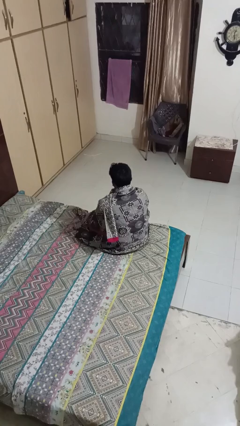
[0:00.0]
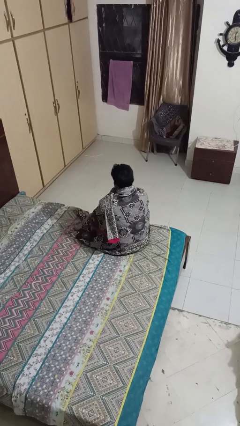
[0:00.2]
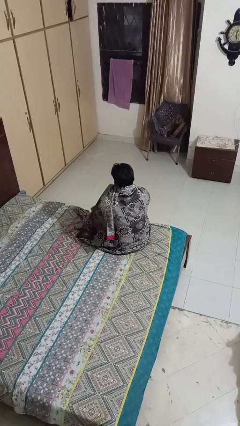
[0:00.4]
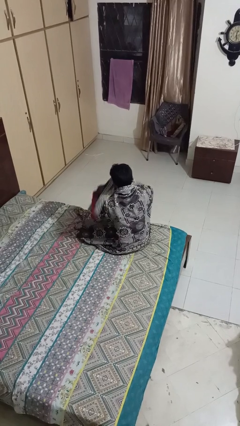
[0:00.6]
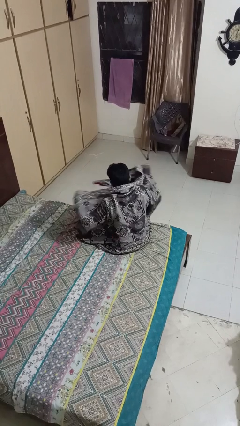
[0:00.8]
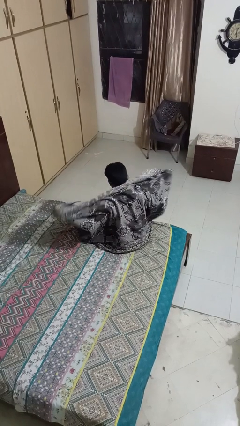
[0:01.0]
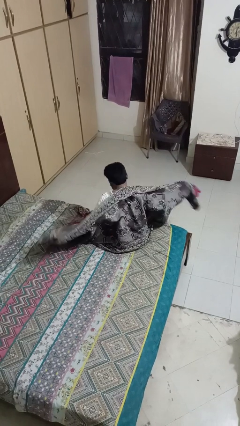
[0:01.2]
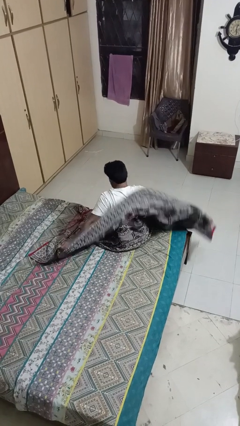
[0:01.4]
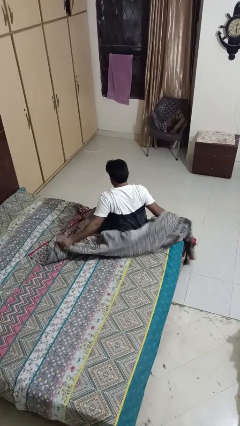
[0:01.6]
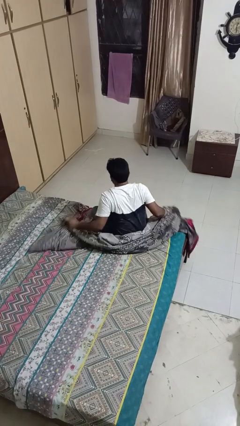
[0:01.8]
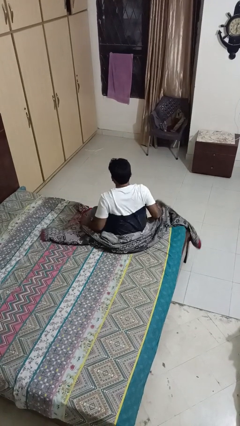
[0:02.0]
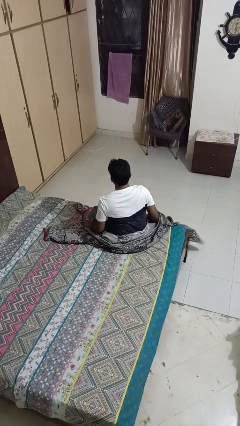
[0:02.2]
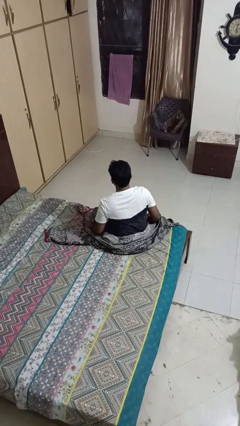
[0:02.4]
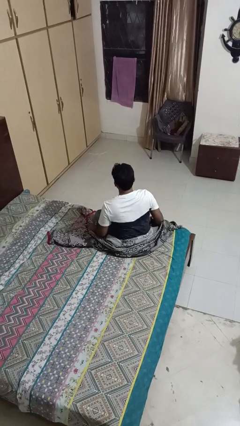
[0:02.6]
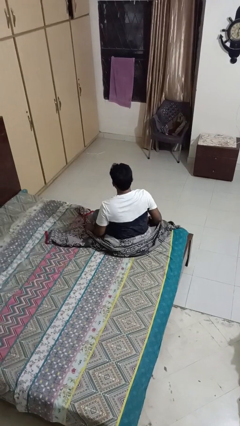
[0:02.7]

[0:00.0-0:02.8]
person uncovers with blanket

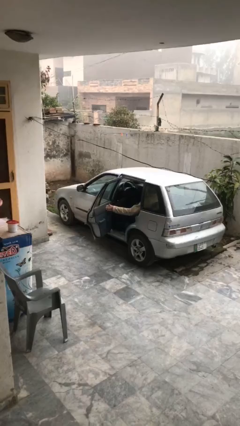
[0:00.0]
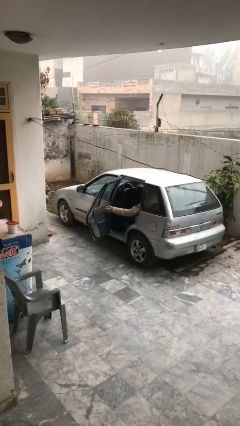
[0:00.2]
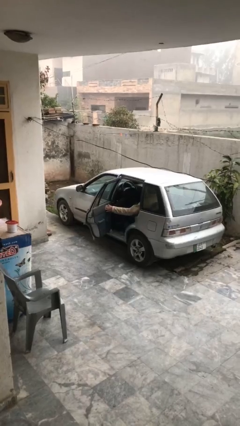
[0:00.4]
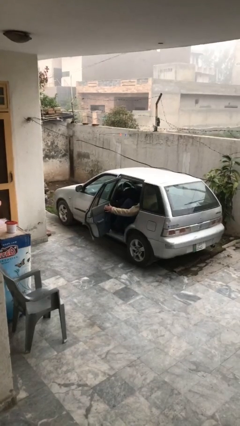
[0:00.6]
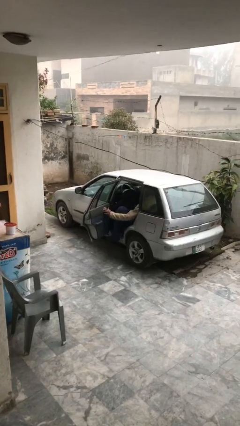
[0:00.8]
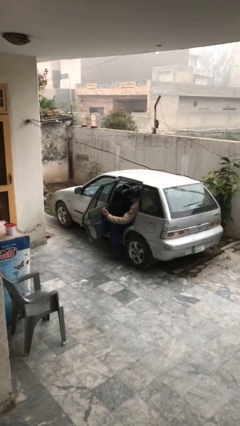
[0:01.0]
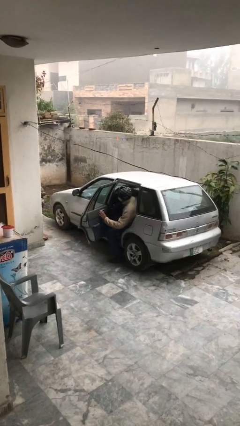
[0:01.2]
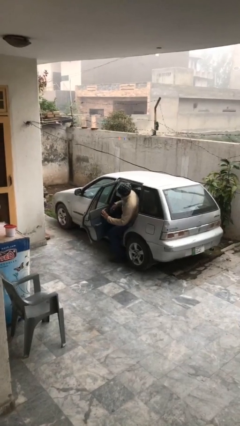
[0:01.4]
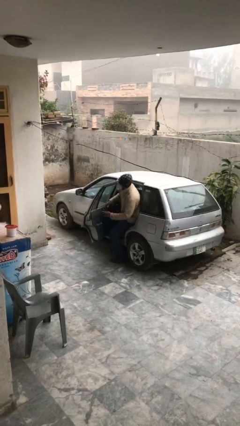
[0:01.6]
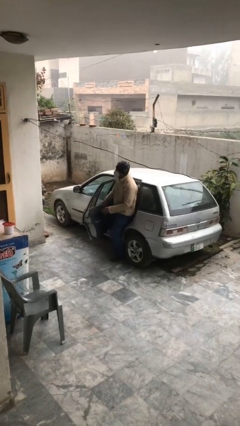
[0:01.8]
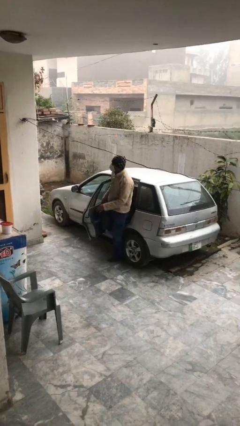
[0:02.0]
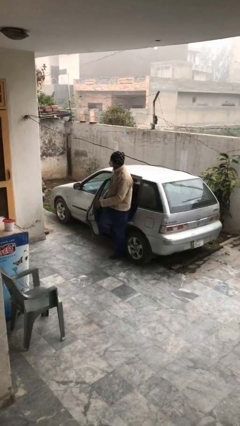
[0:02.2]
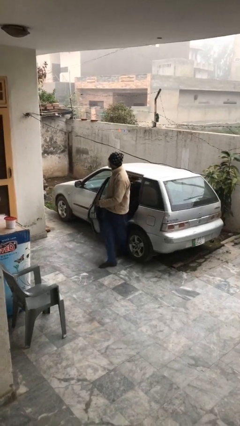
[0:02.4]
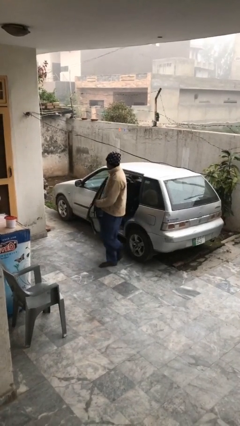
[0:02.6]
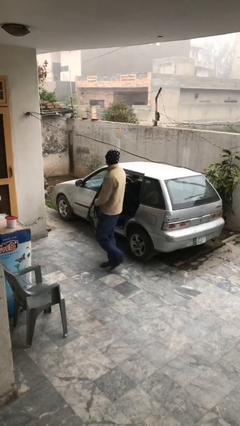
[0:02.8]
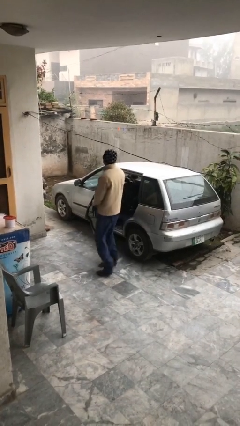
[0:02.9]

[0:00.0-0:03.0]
person exits car

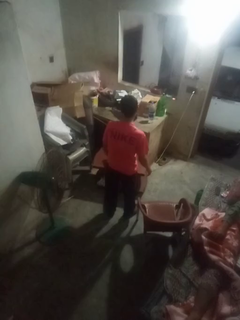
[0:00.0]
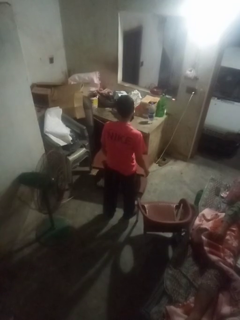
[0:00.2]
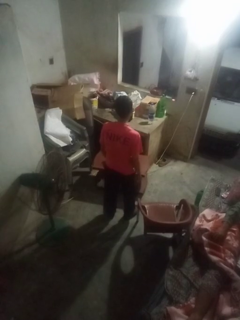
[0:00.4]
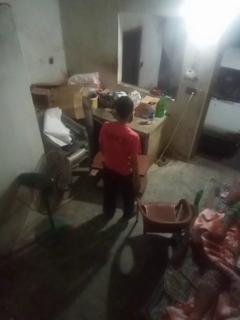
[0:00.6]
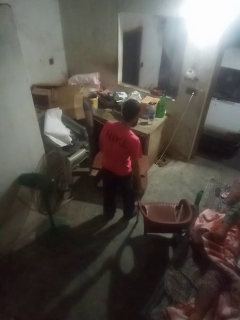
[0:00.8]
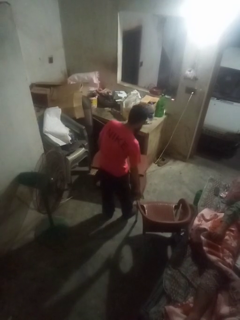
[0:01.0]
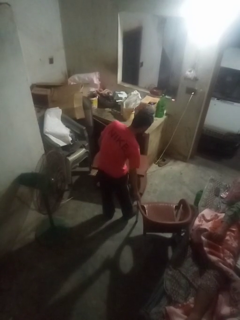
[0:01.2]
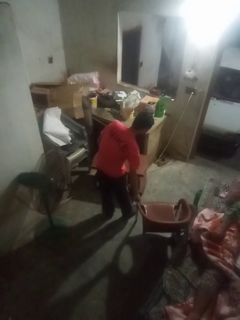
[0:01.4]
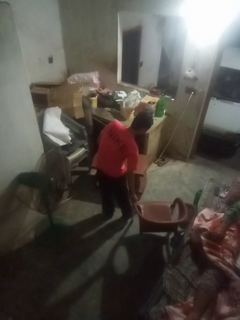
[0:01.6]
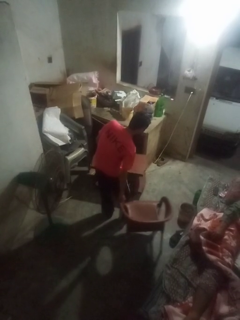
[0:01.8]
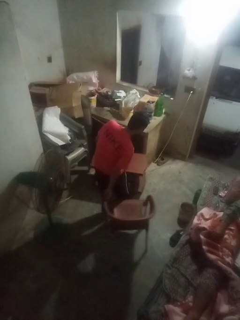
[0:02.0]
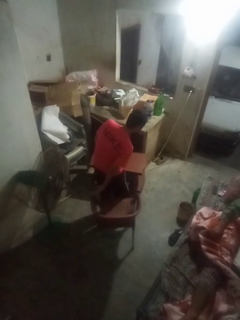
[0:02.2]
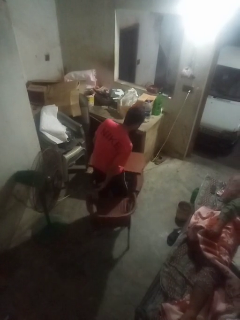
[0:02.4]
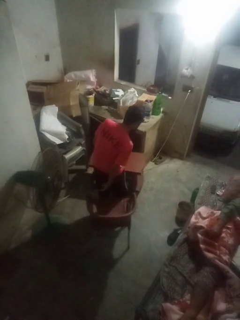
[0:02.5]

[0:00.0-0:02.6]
person pulls out chair

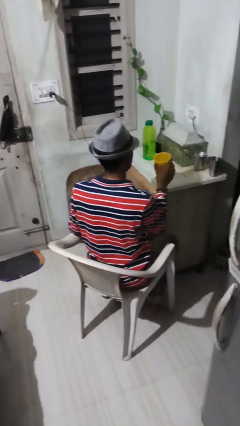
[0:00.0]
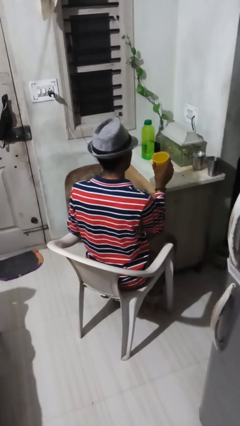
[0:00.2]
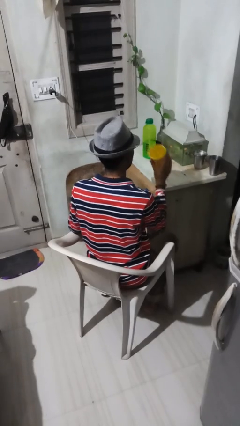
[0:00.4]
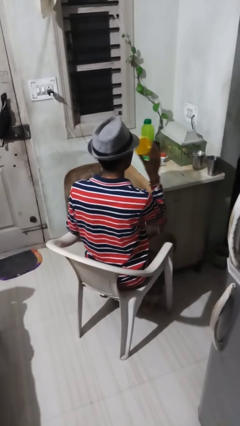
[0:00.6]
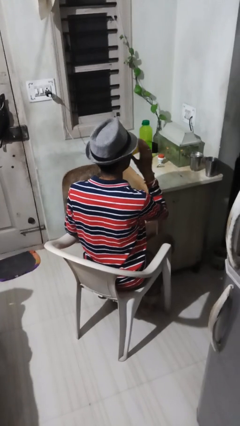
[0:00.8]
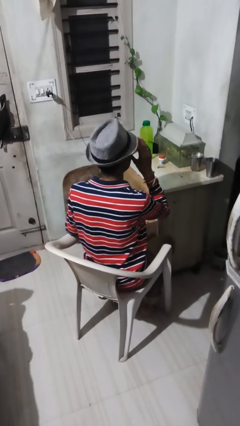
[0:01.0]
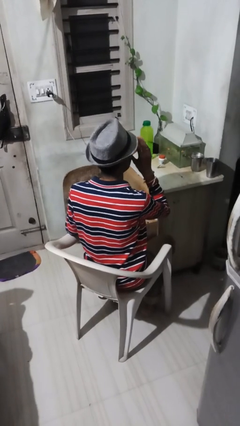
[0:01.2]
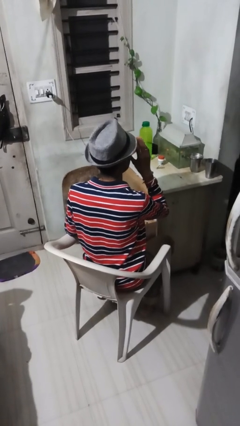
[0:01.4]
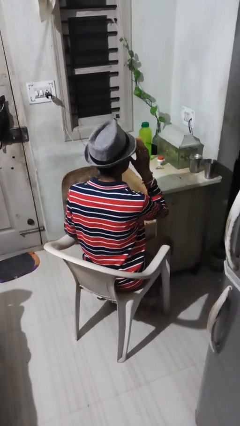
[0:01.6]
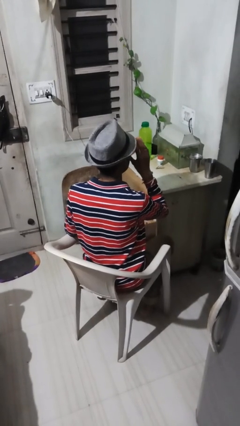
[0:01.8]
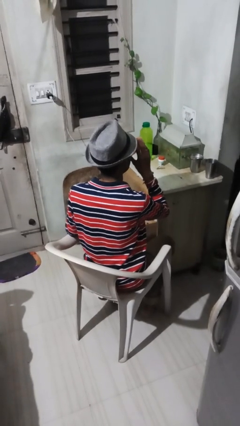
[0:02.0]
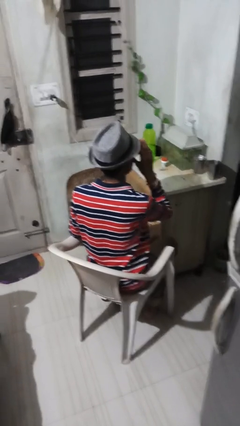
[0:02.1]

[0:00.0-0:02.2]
person drinks from mug

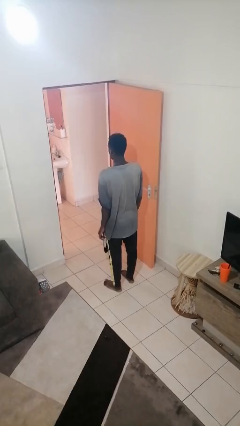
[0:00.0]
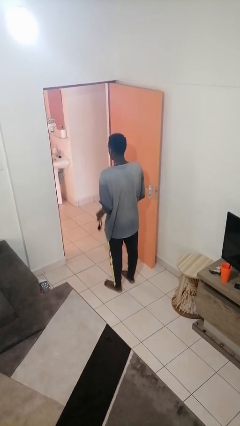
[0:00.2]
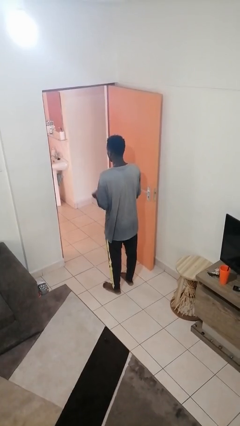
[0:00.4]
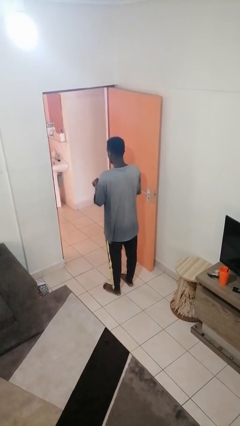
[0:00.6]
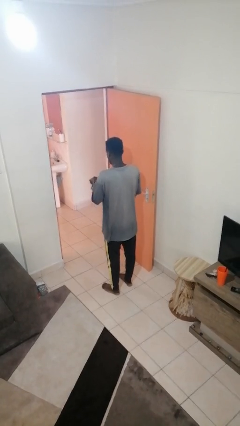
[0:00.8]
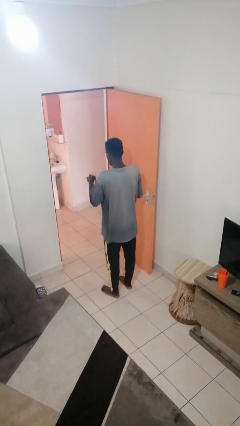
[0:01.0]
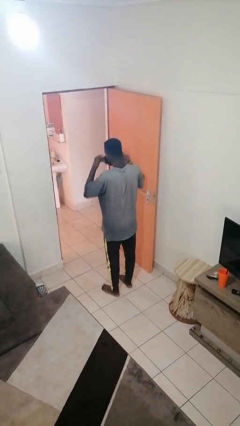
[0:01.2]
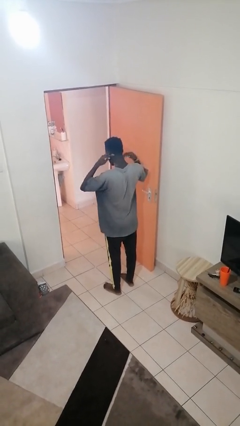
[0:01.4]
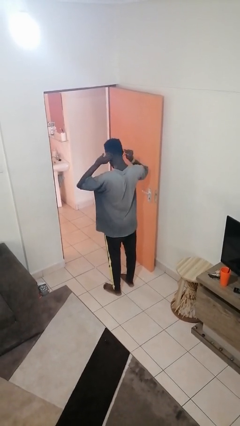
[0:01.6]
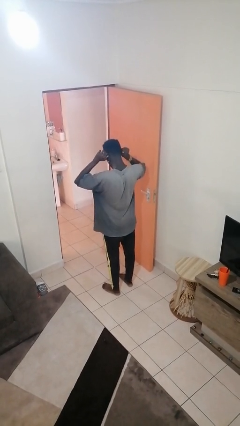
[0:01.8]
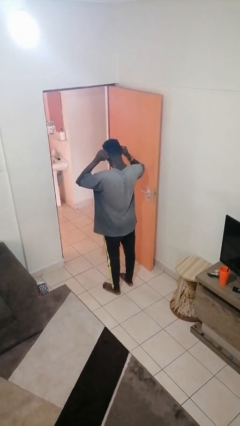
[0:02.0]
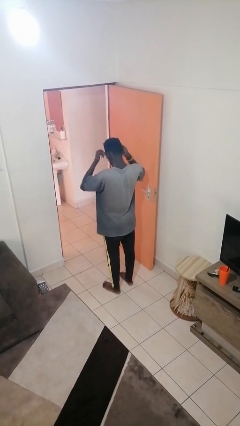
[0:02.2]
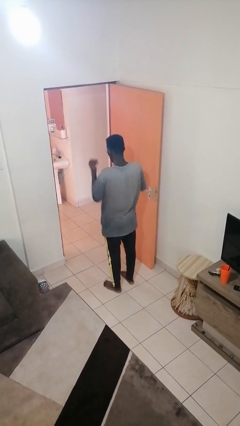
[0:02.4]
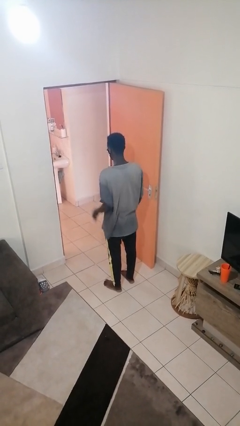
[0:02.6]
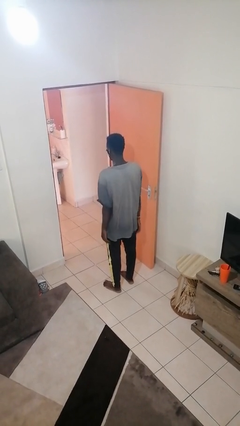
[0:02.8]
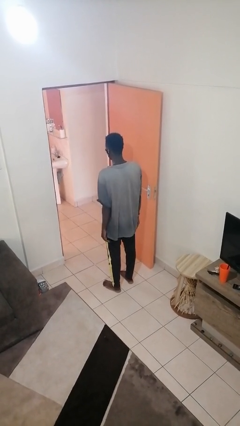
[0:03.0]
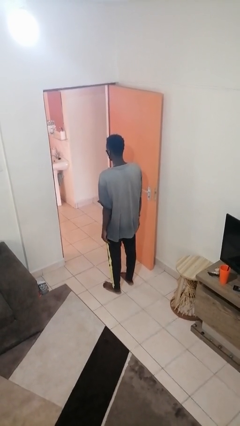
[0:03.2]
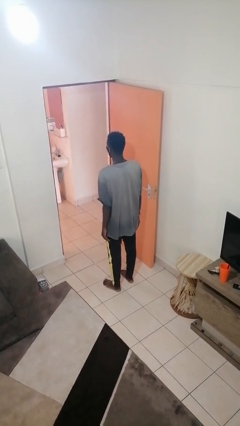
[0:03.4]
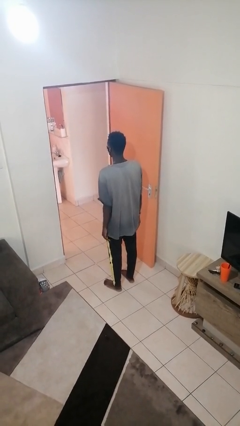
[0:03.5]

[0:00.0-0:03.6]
person puts on facemask

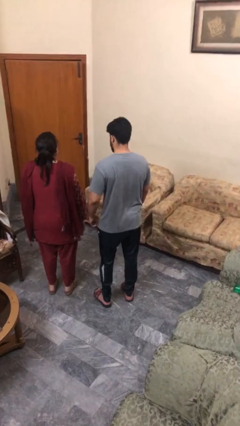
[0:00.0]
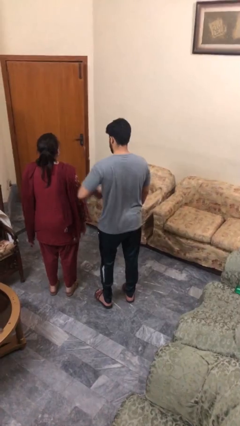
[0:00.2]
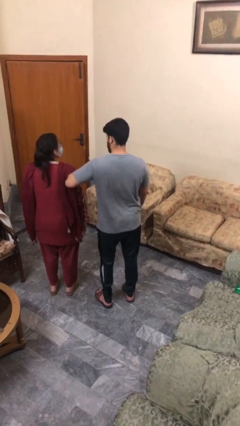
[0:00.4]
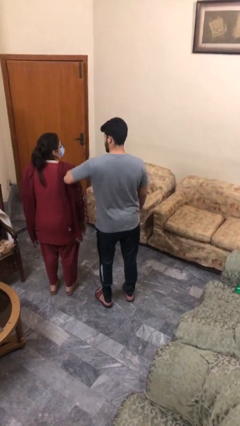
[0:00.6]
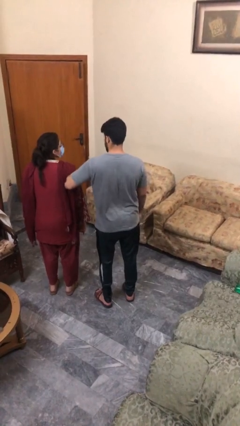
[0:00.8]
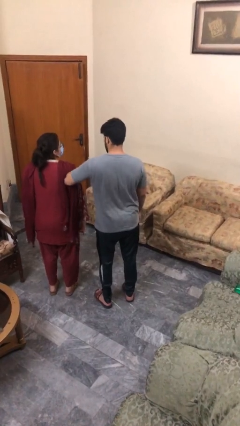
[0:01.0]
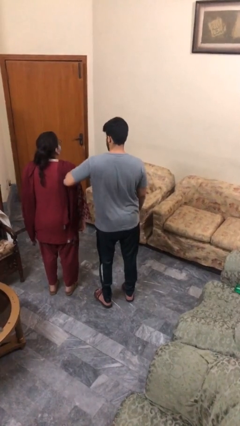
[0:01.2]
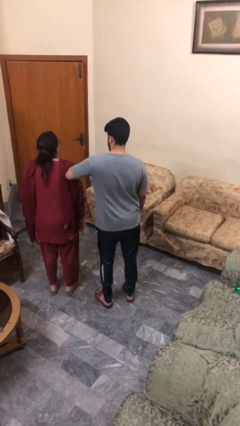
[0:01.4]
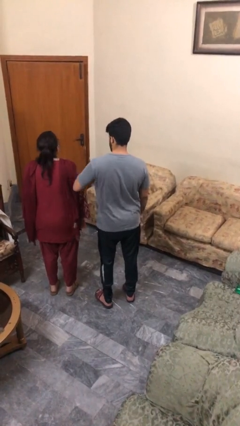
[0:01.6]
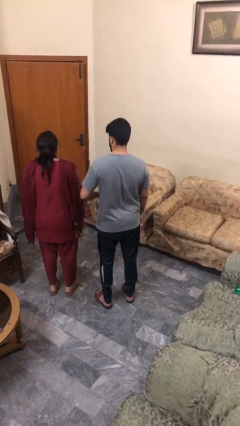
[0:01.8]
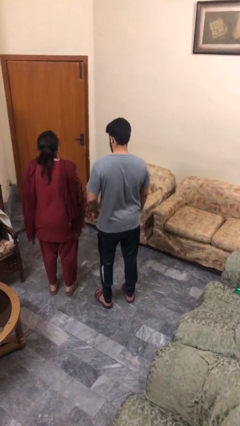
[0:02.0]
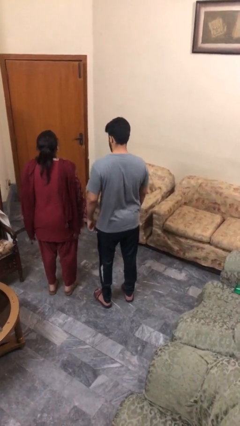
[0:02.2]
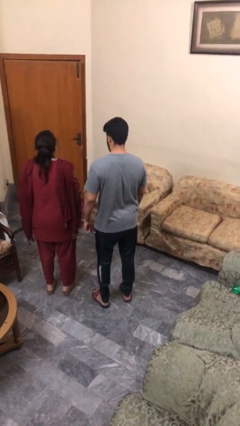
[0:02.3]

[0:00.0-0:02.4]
person nudges person with elbow

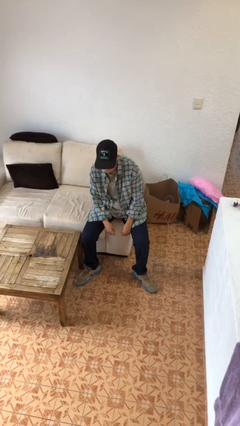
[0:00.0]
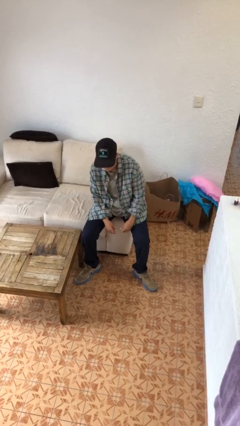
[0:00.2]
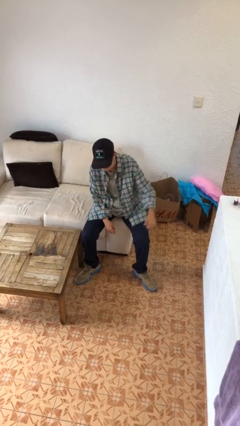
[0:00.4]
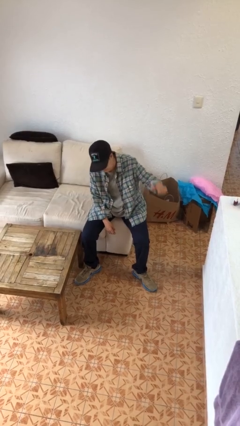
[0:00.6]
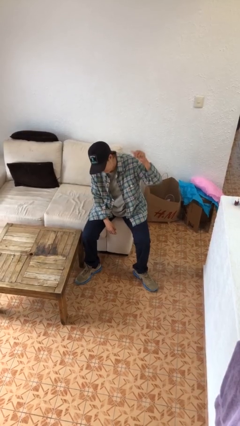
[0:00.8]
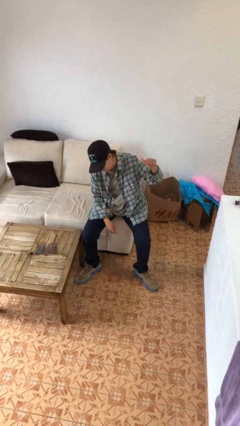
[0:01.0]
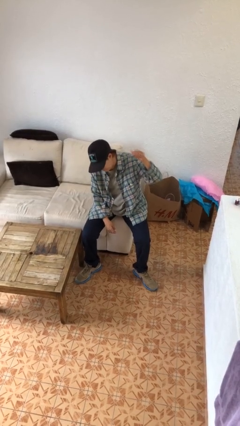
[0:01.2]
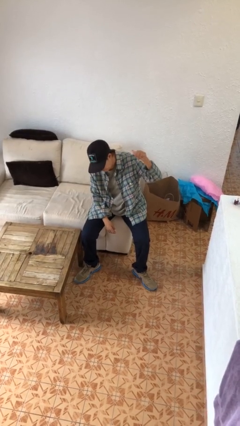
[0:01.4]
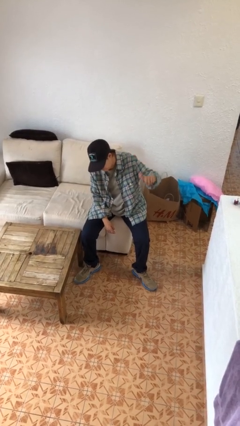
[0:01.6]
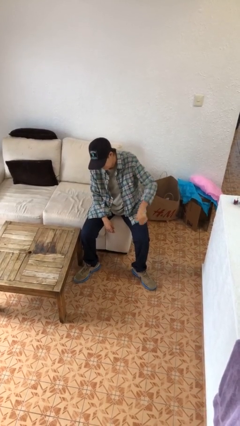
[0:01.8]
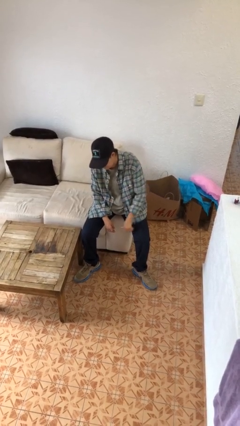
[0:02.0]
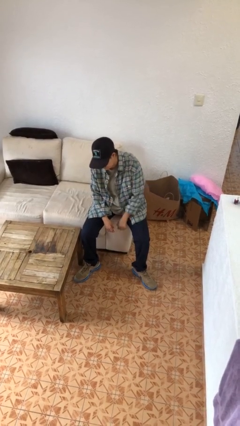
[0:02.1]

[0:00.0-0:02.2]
person gestures behind me
